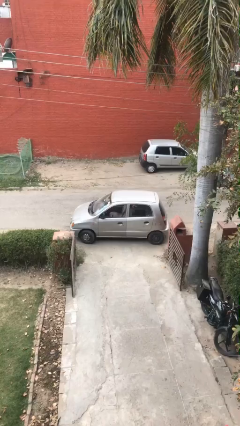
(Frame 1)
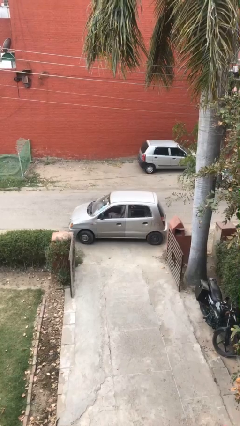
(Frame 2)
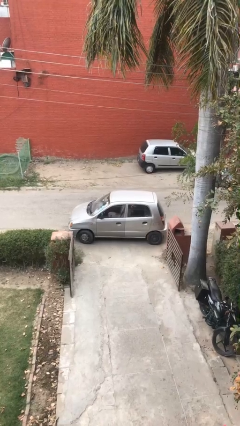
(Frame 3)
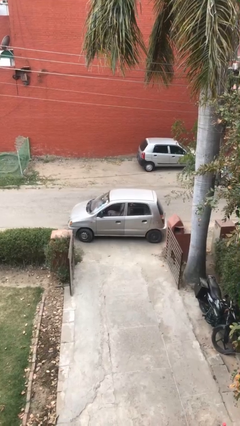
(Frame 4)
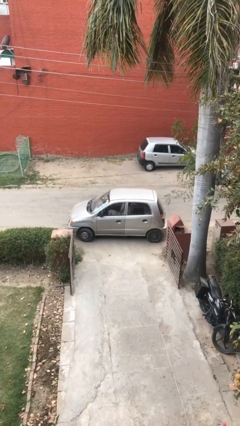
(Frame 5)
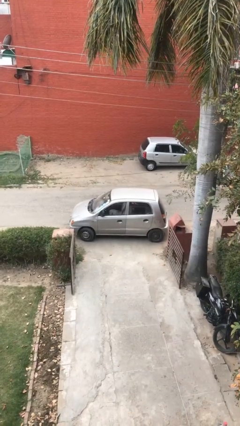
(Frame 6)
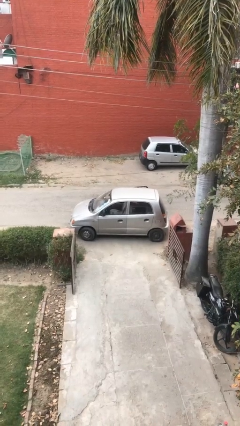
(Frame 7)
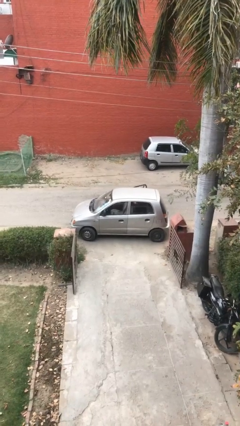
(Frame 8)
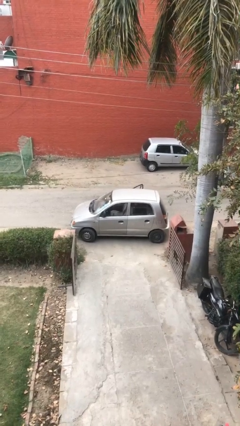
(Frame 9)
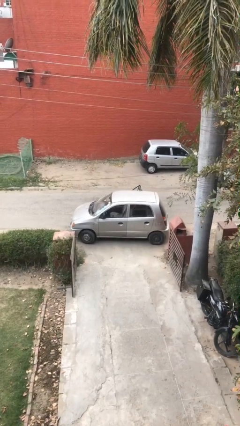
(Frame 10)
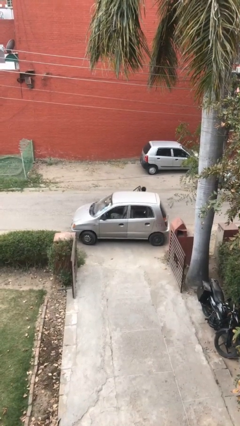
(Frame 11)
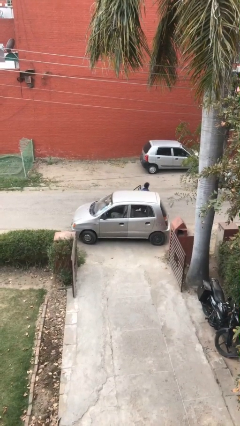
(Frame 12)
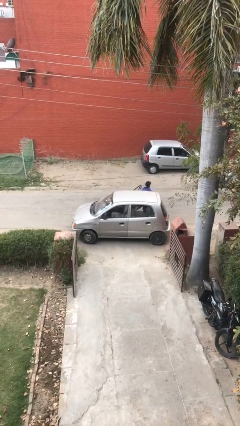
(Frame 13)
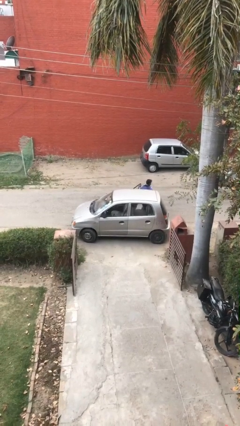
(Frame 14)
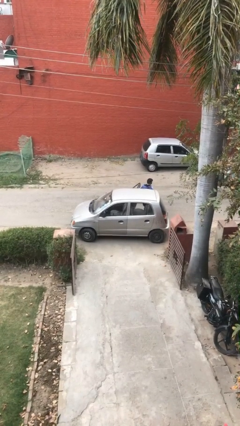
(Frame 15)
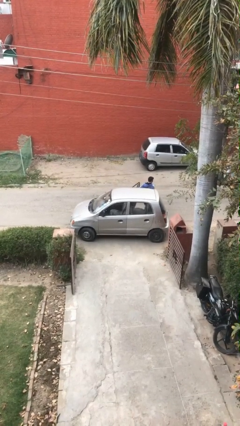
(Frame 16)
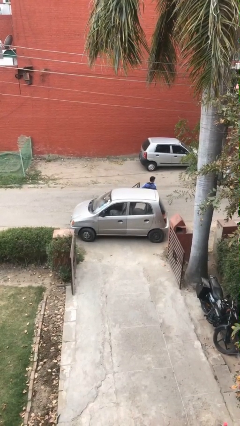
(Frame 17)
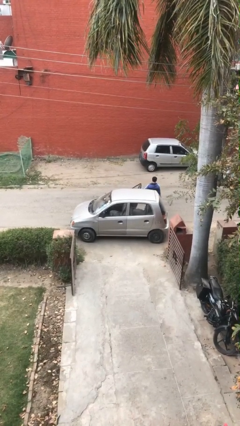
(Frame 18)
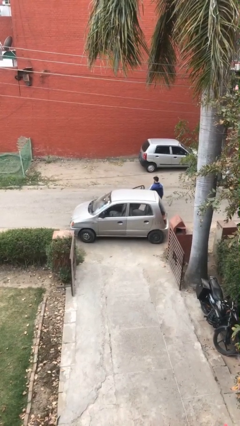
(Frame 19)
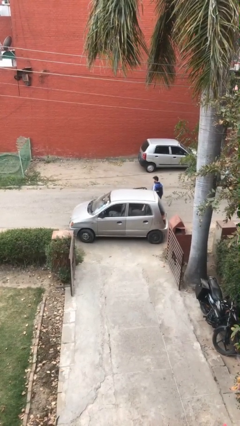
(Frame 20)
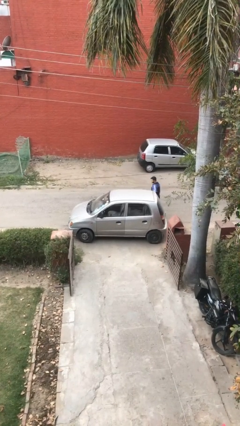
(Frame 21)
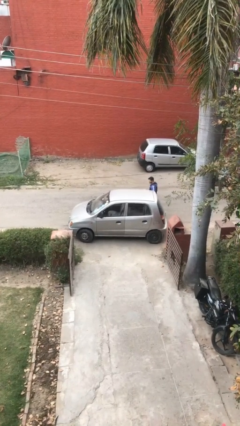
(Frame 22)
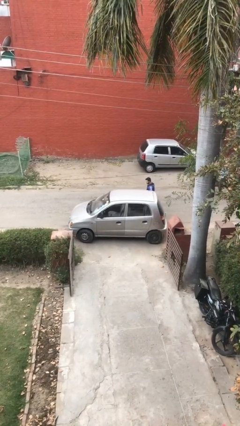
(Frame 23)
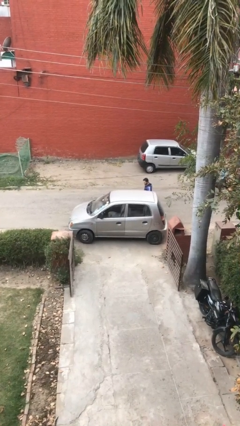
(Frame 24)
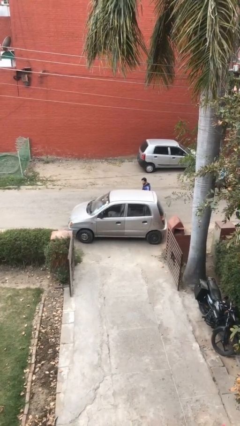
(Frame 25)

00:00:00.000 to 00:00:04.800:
car drops off person

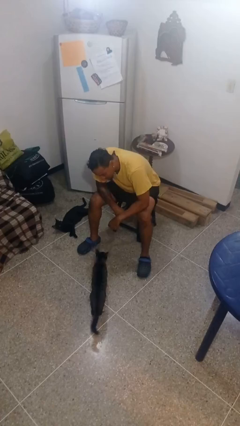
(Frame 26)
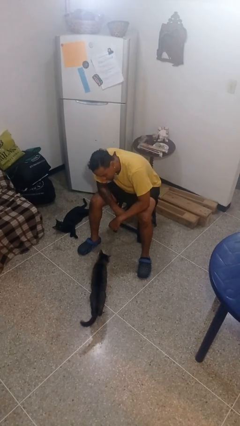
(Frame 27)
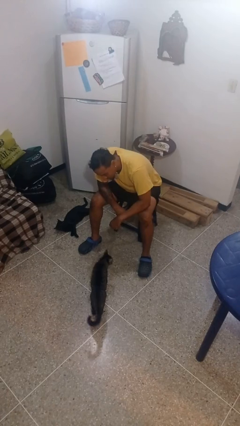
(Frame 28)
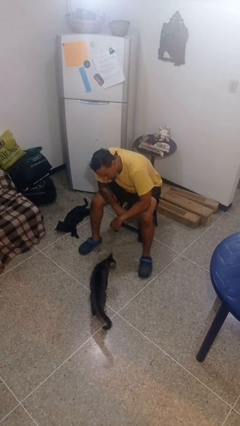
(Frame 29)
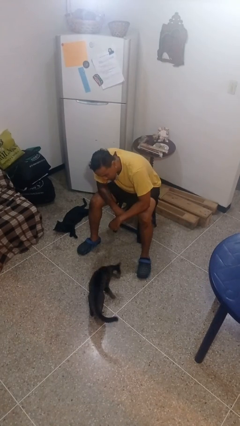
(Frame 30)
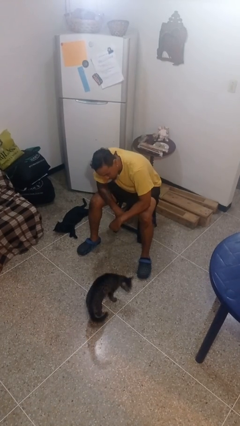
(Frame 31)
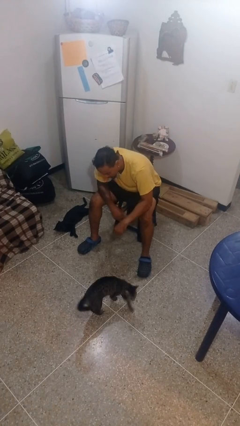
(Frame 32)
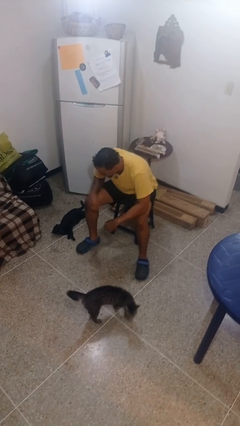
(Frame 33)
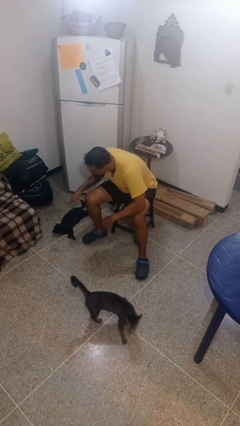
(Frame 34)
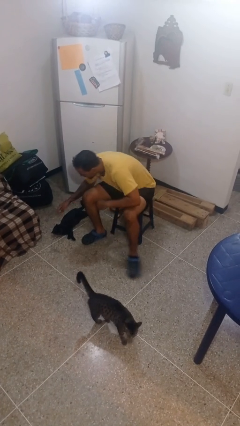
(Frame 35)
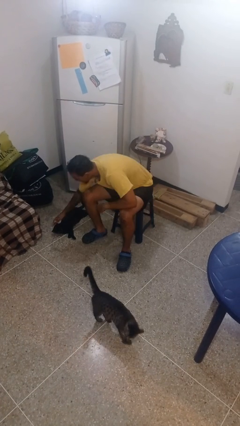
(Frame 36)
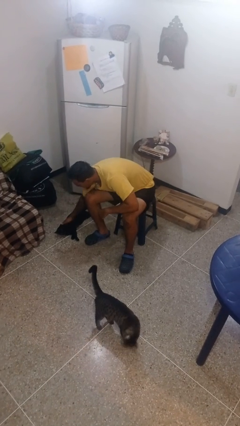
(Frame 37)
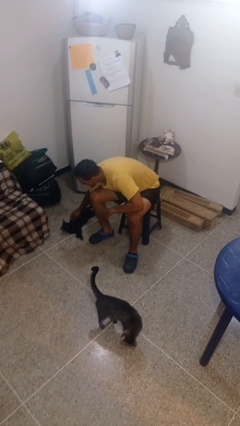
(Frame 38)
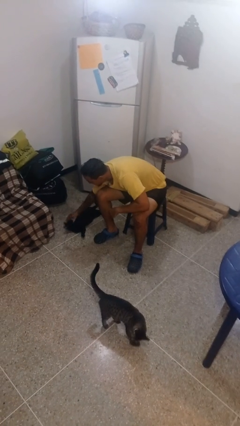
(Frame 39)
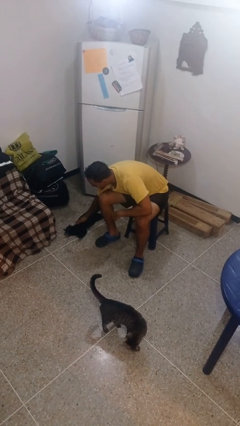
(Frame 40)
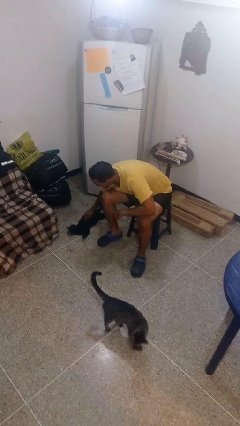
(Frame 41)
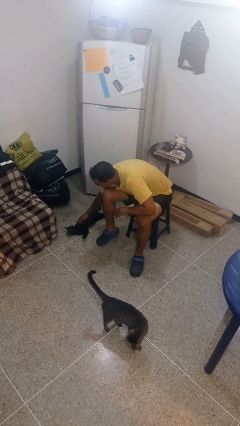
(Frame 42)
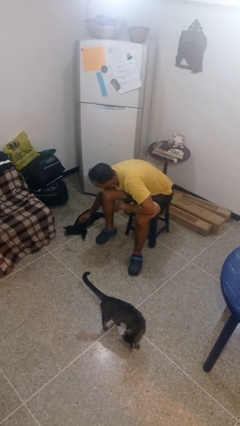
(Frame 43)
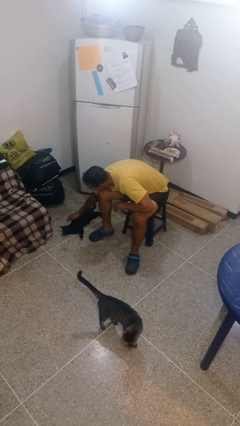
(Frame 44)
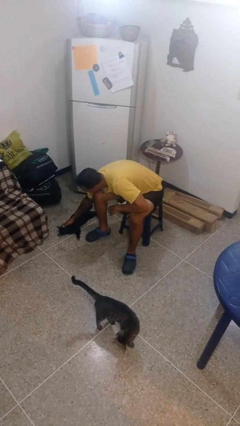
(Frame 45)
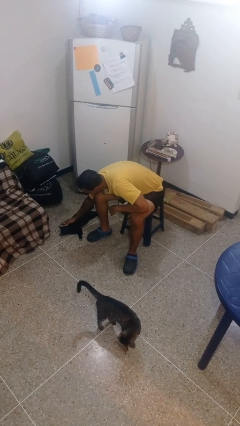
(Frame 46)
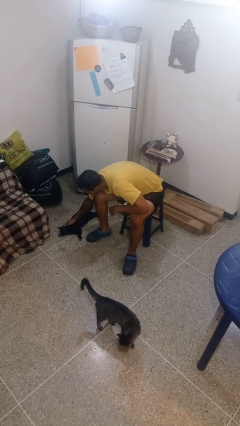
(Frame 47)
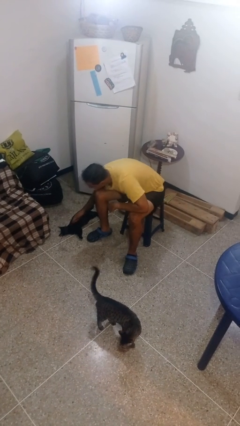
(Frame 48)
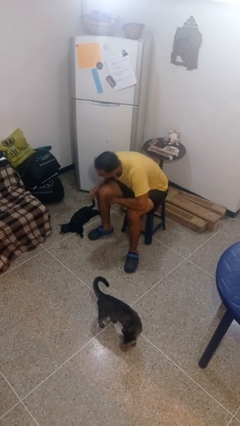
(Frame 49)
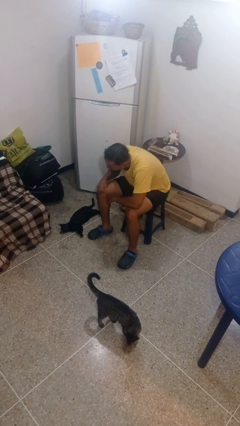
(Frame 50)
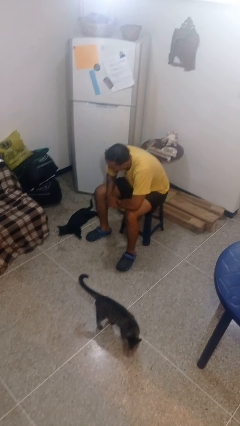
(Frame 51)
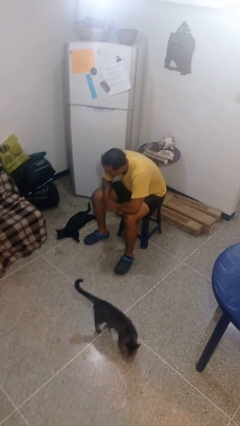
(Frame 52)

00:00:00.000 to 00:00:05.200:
person pets cat

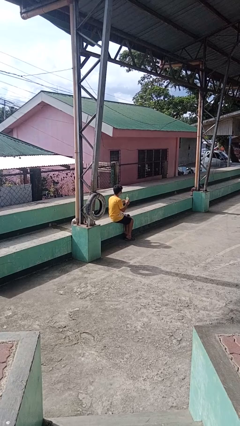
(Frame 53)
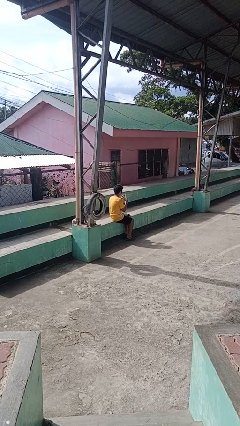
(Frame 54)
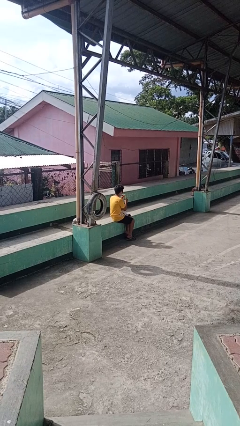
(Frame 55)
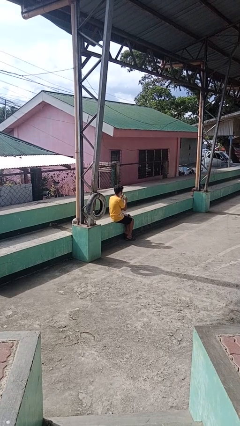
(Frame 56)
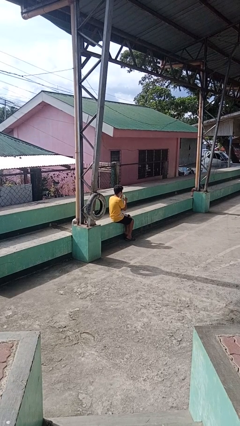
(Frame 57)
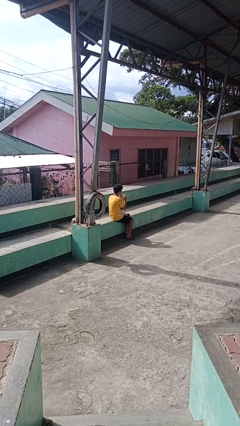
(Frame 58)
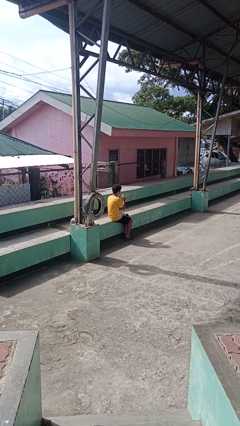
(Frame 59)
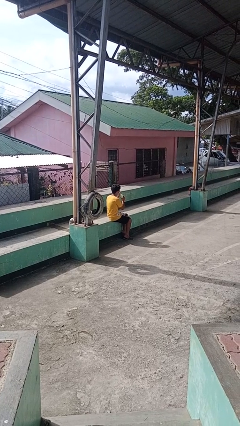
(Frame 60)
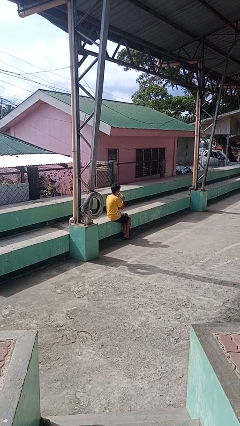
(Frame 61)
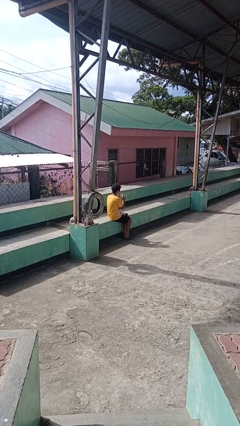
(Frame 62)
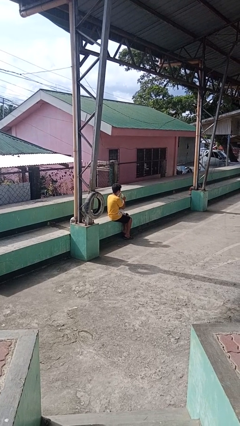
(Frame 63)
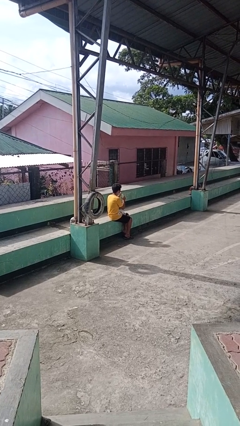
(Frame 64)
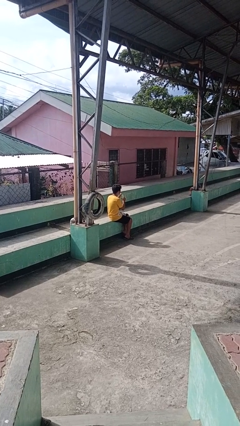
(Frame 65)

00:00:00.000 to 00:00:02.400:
person drinks from straw

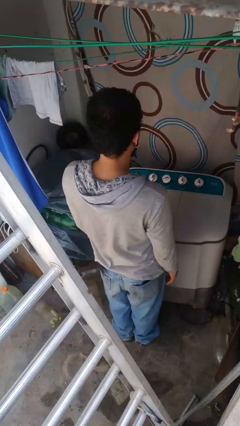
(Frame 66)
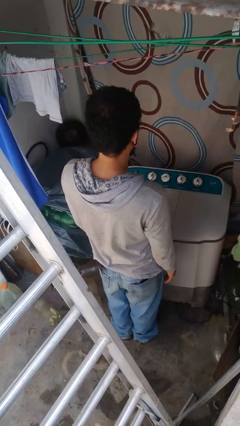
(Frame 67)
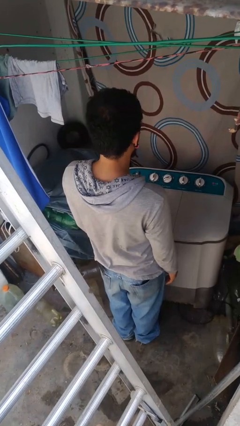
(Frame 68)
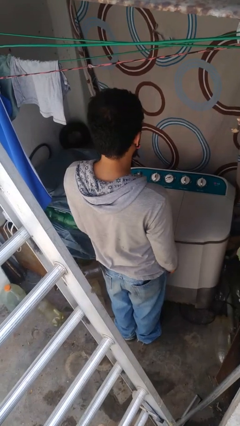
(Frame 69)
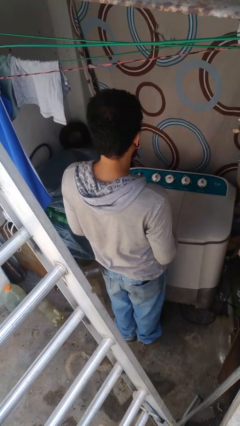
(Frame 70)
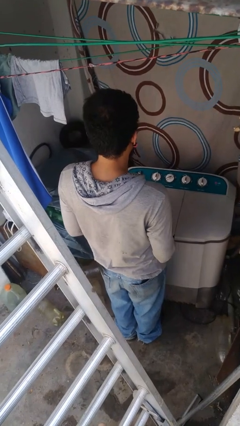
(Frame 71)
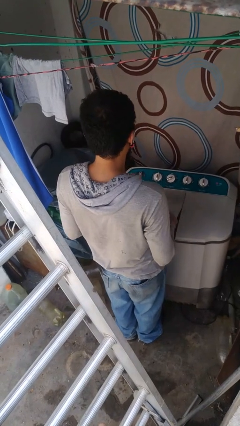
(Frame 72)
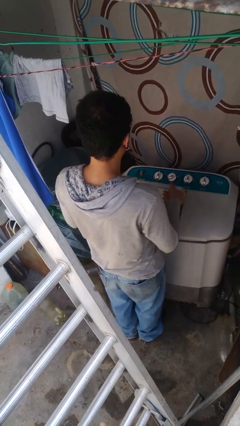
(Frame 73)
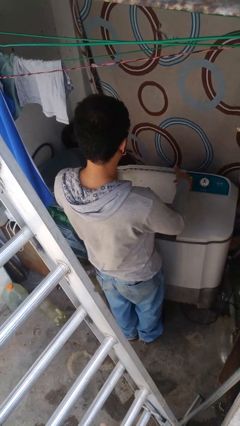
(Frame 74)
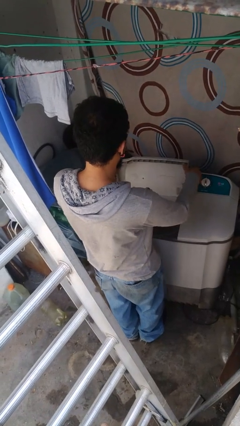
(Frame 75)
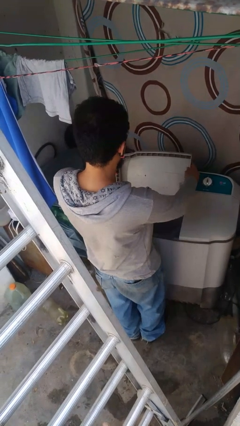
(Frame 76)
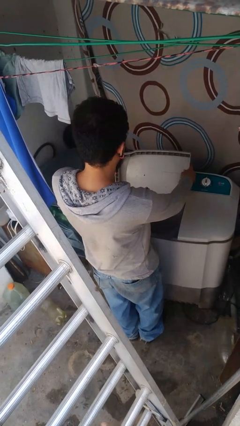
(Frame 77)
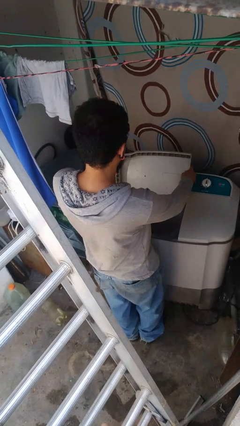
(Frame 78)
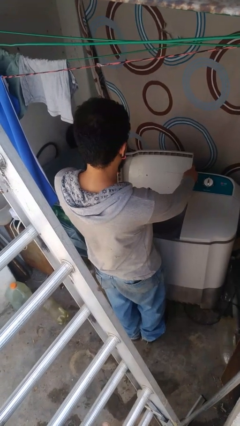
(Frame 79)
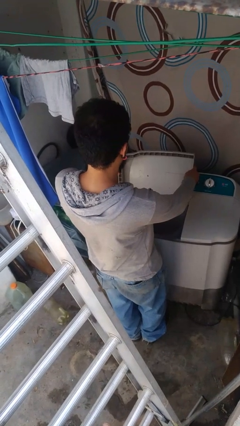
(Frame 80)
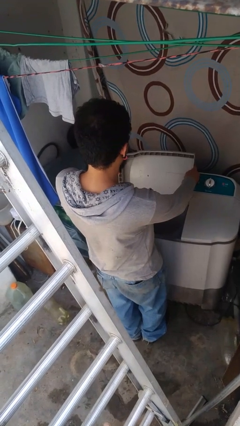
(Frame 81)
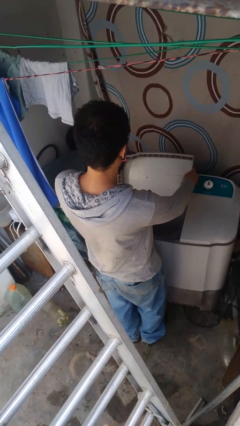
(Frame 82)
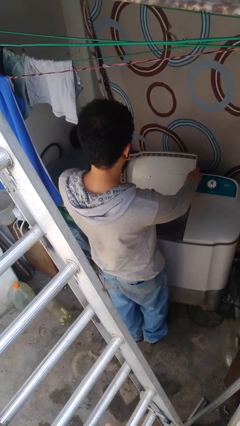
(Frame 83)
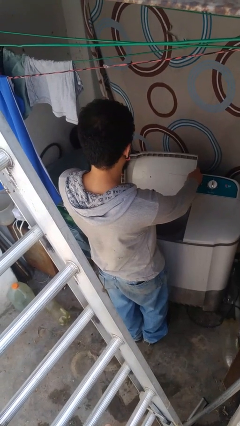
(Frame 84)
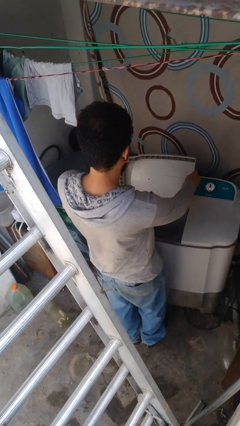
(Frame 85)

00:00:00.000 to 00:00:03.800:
person opens clothes washer

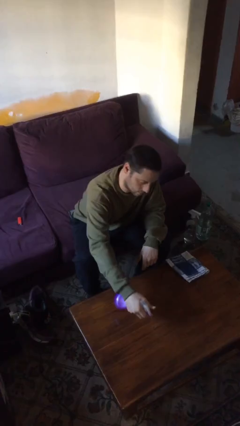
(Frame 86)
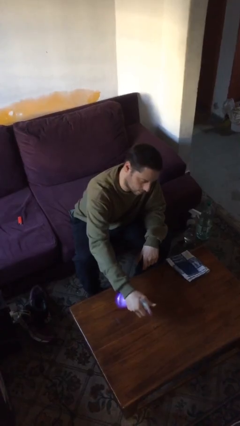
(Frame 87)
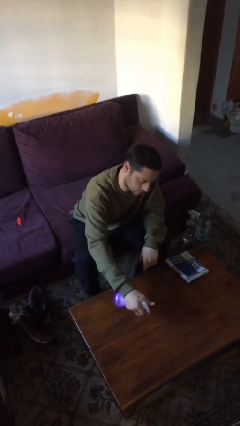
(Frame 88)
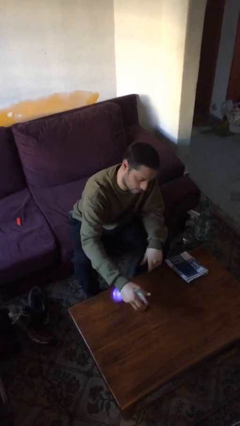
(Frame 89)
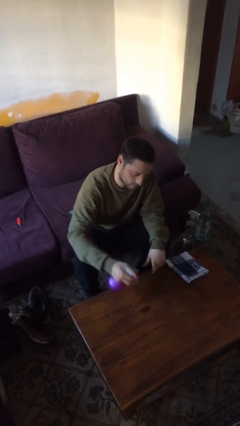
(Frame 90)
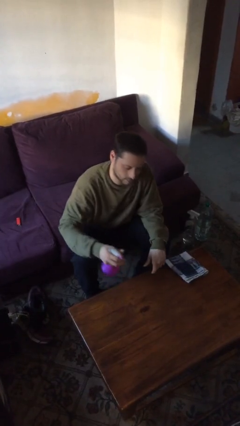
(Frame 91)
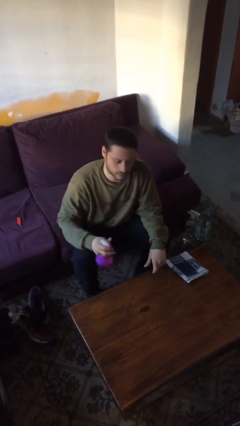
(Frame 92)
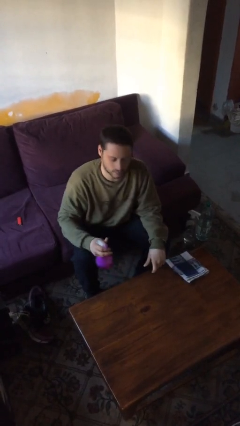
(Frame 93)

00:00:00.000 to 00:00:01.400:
person sprays from bottle
